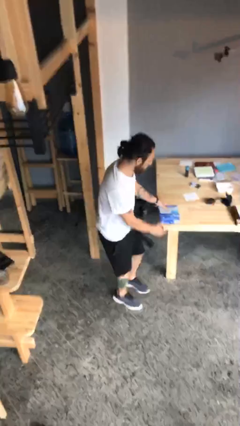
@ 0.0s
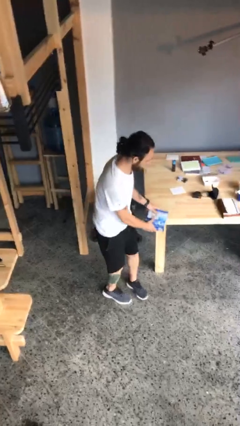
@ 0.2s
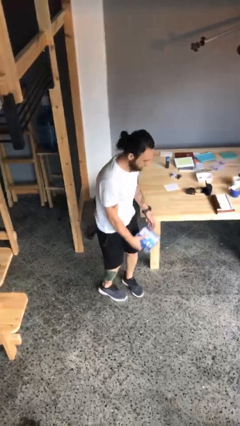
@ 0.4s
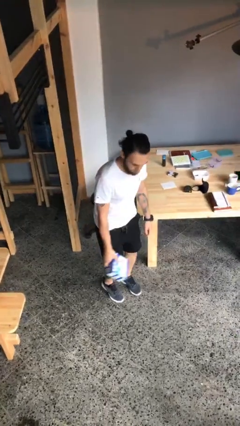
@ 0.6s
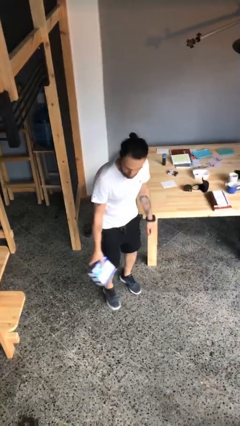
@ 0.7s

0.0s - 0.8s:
person picks up object from table

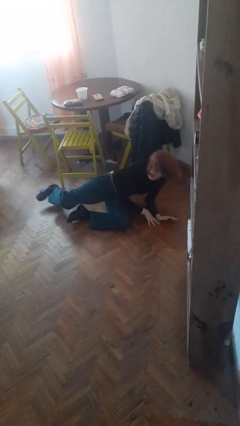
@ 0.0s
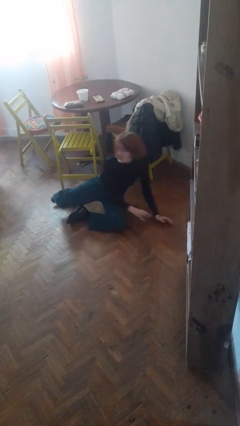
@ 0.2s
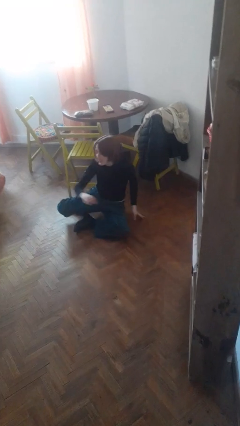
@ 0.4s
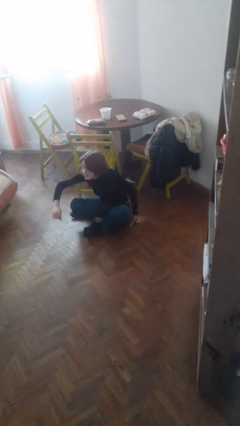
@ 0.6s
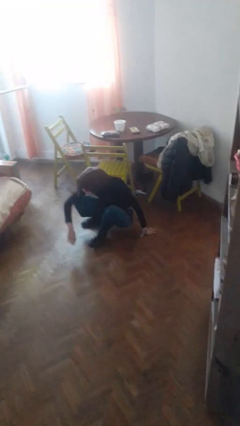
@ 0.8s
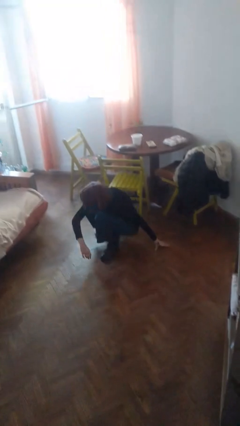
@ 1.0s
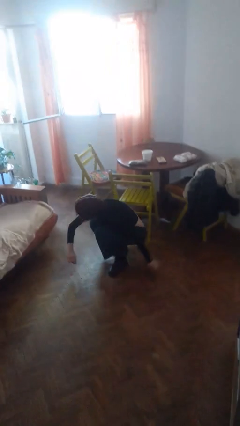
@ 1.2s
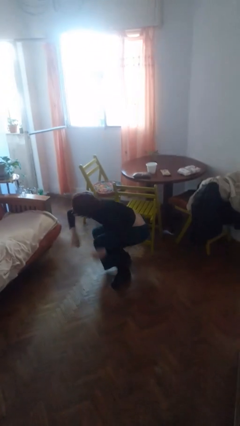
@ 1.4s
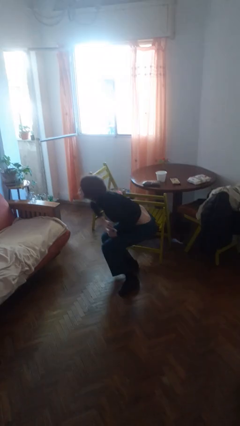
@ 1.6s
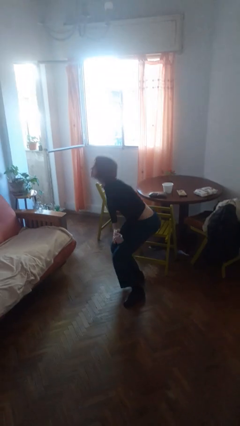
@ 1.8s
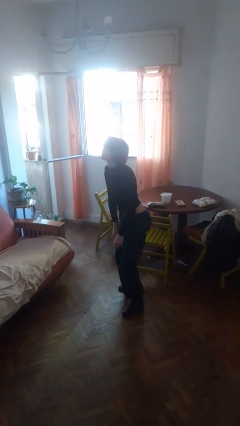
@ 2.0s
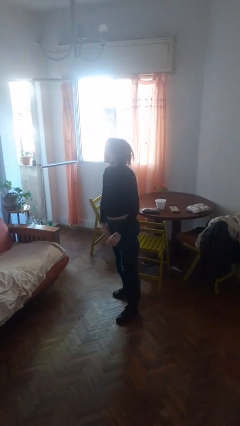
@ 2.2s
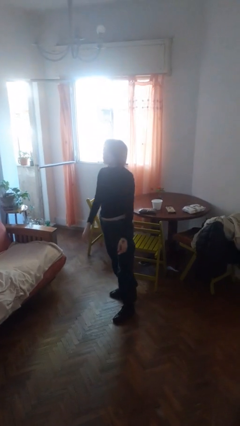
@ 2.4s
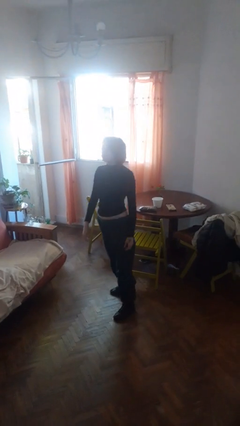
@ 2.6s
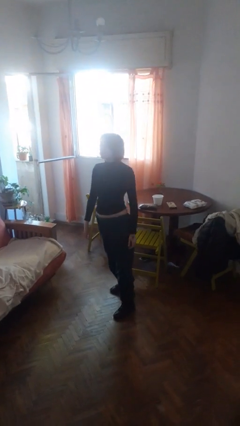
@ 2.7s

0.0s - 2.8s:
person stands up from floor

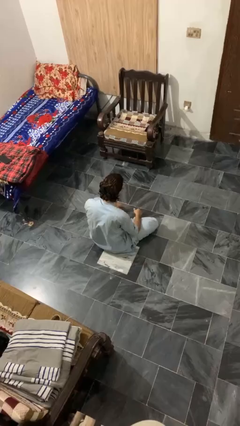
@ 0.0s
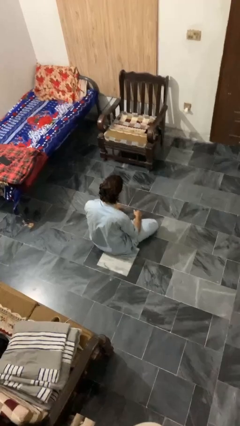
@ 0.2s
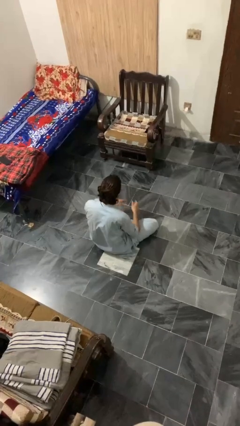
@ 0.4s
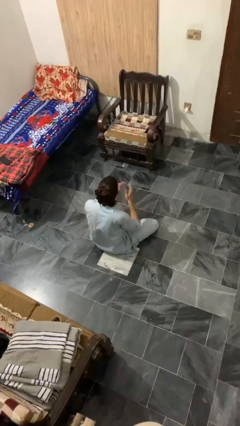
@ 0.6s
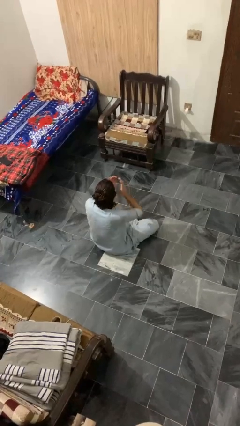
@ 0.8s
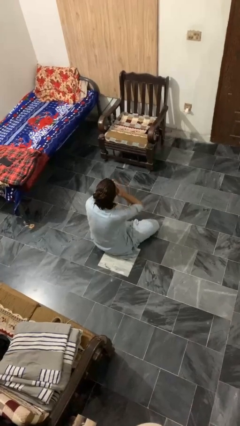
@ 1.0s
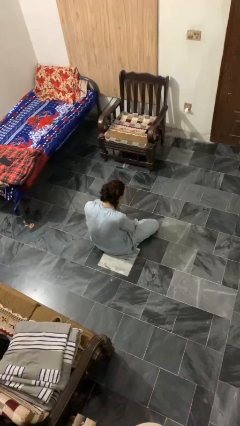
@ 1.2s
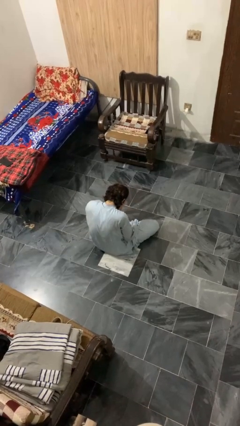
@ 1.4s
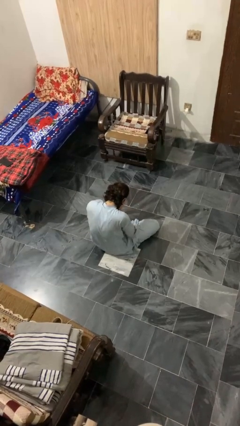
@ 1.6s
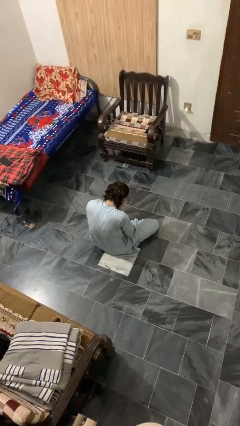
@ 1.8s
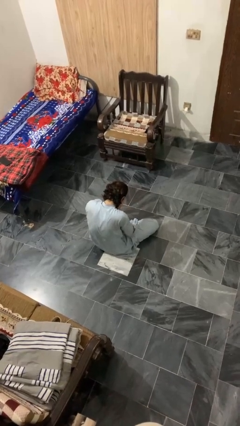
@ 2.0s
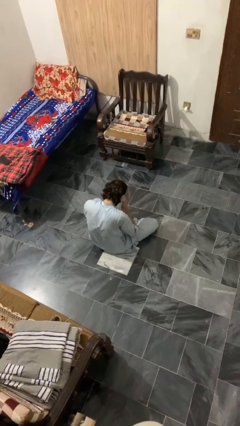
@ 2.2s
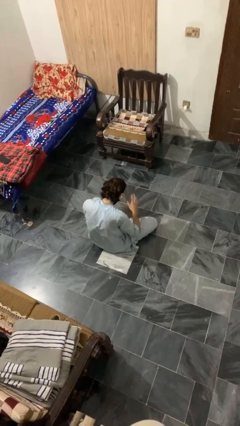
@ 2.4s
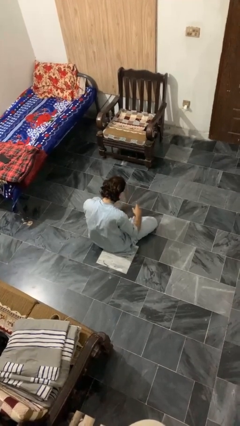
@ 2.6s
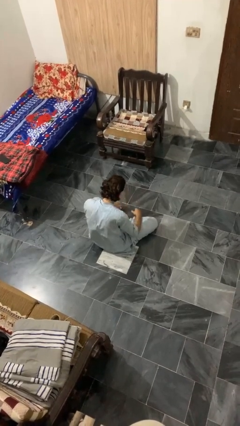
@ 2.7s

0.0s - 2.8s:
person sneezes into hand

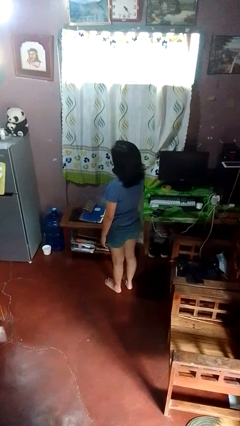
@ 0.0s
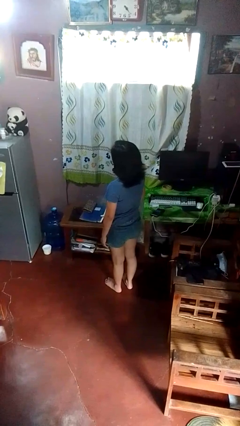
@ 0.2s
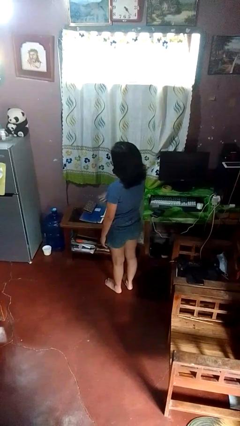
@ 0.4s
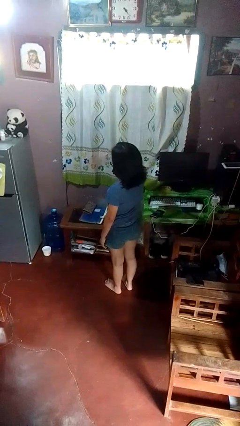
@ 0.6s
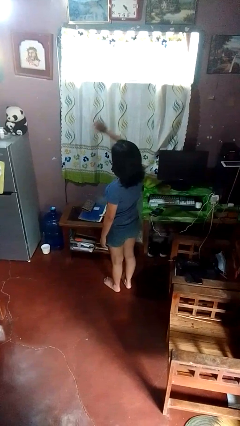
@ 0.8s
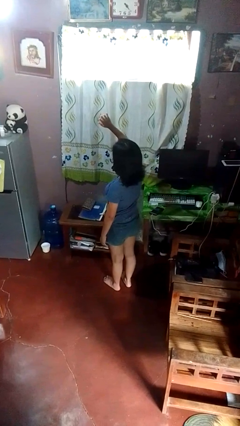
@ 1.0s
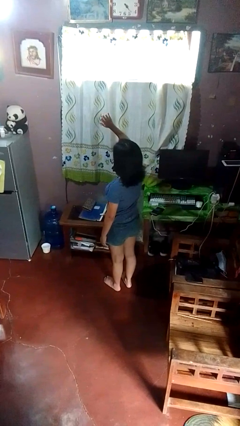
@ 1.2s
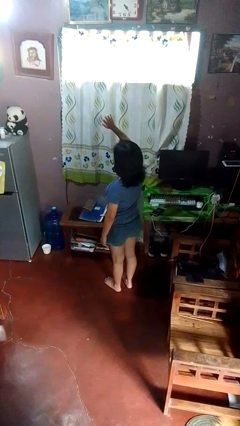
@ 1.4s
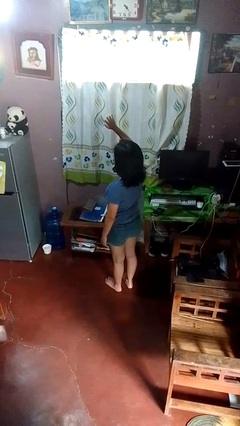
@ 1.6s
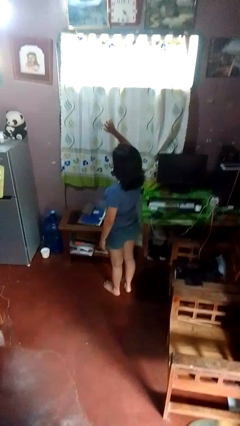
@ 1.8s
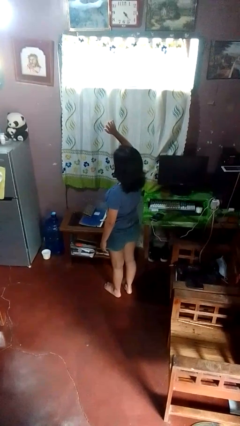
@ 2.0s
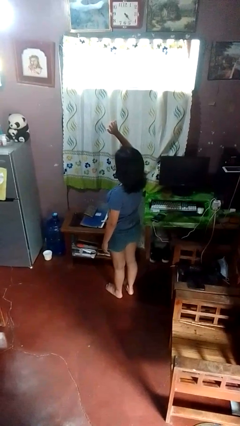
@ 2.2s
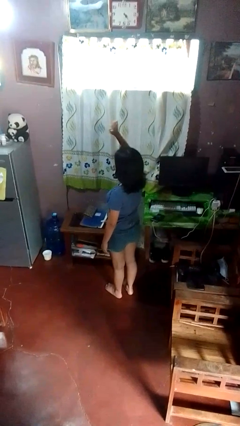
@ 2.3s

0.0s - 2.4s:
person gestures swipe up

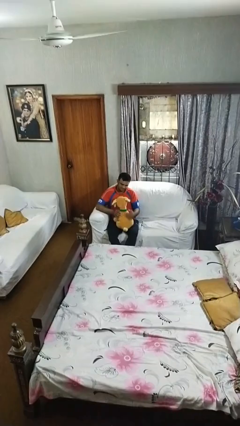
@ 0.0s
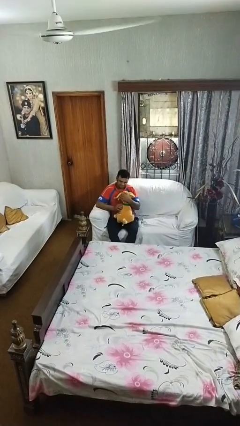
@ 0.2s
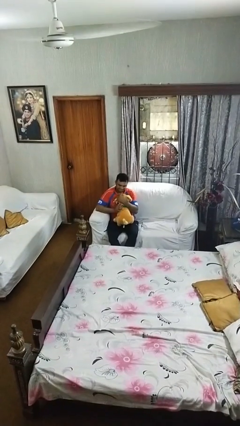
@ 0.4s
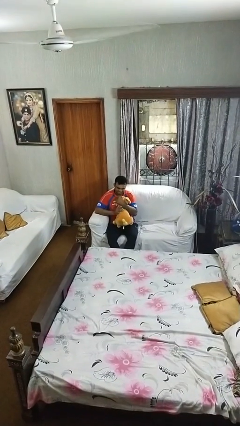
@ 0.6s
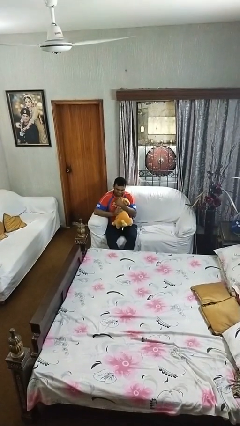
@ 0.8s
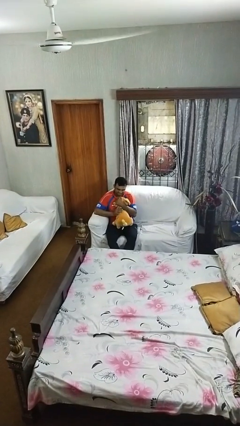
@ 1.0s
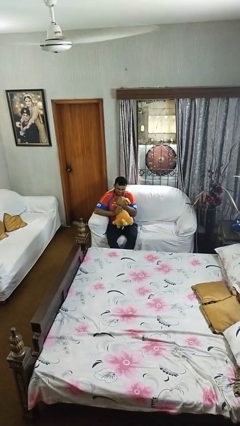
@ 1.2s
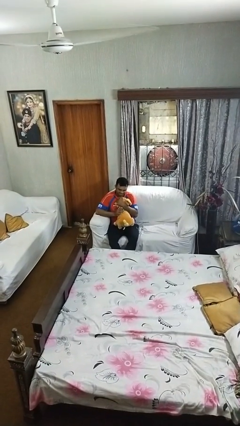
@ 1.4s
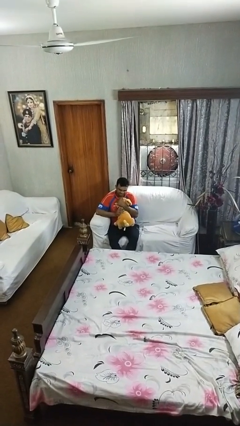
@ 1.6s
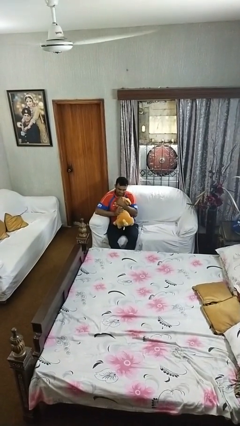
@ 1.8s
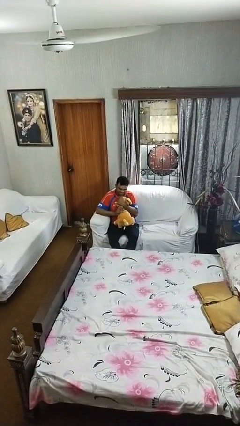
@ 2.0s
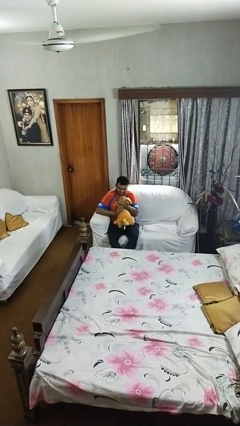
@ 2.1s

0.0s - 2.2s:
person hugs stuffed animal

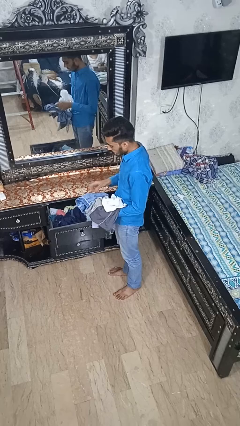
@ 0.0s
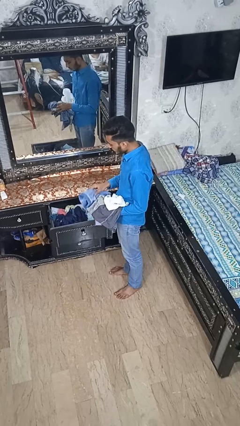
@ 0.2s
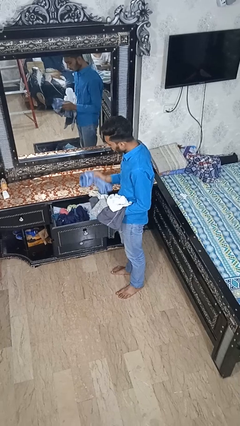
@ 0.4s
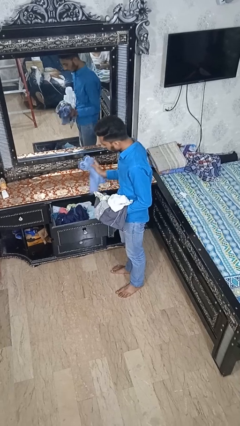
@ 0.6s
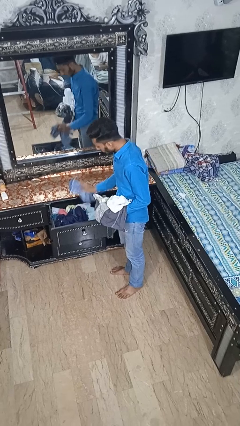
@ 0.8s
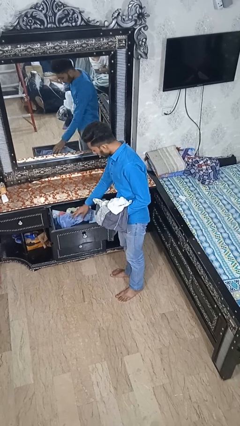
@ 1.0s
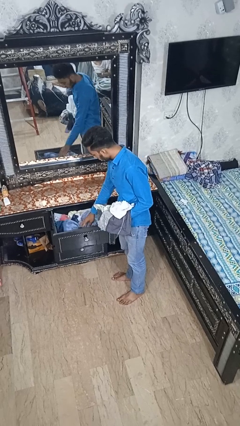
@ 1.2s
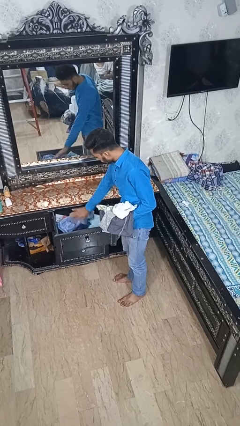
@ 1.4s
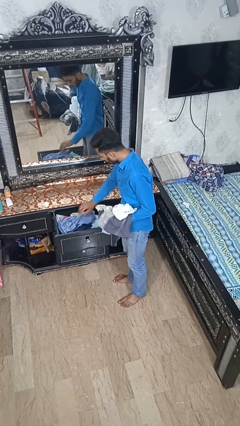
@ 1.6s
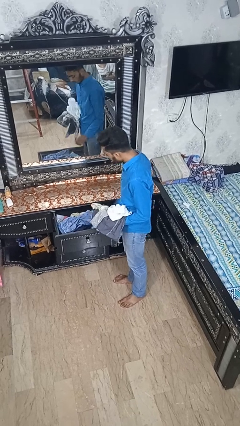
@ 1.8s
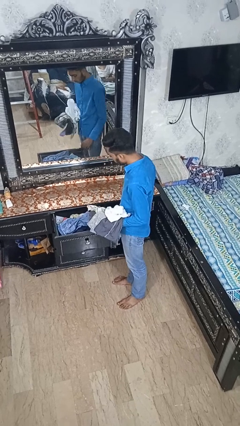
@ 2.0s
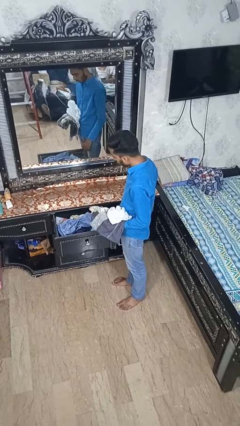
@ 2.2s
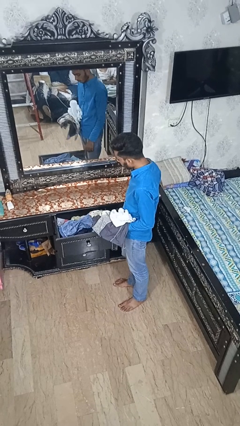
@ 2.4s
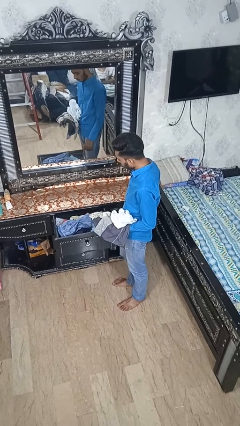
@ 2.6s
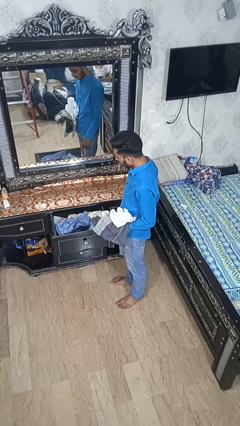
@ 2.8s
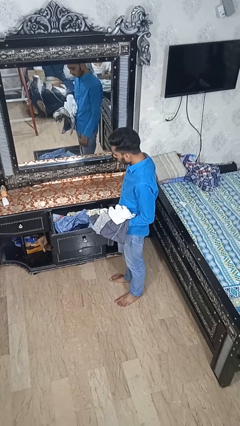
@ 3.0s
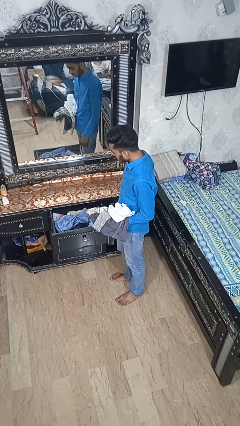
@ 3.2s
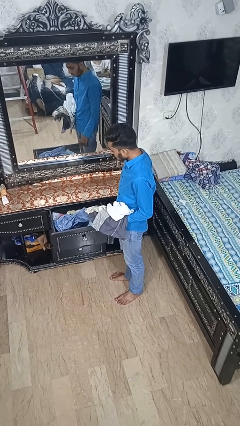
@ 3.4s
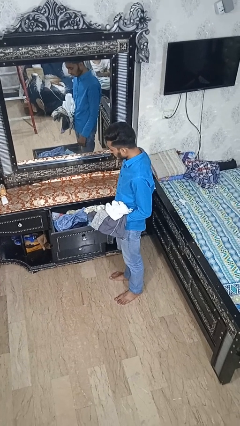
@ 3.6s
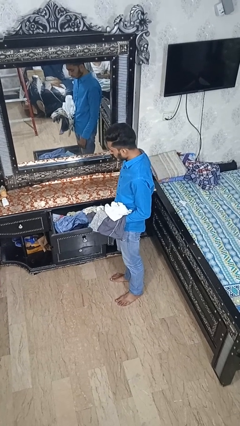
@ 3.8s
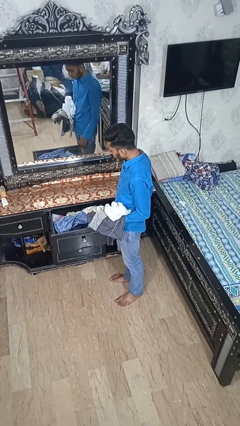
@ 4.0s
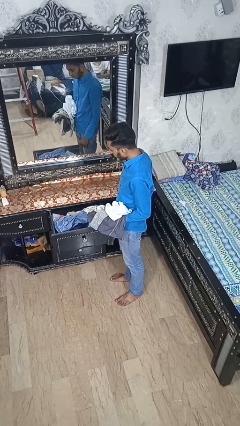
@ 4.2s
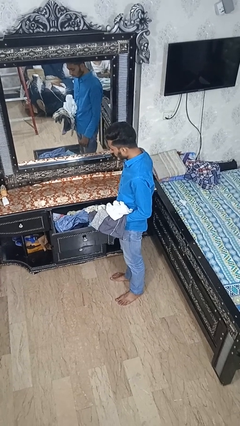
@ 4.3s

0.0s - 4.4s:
person puts clothes into dresser

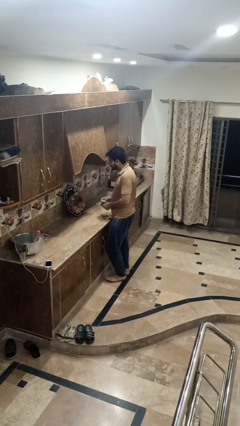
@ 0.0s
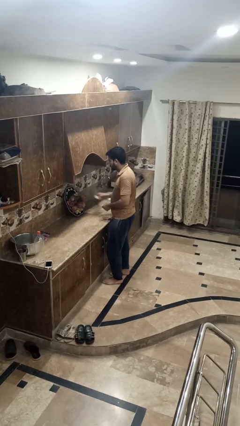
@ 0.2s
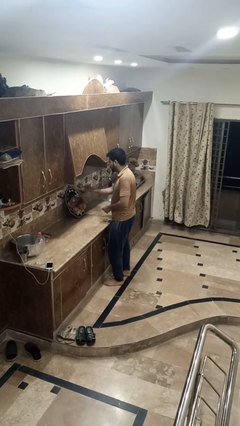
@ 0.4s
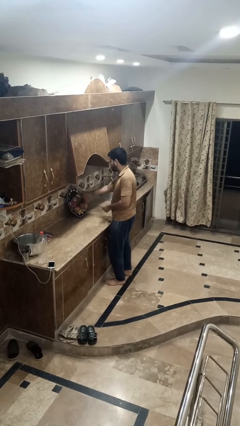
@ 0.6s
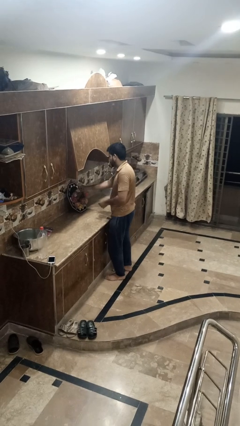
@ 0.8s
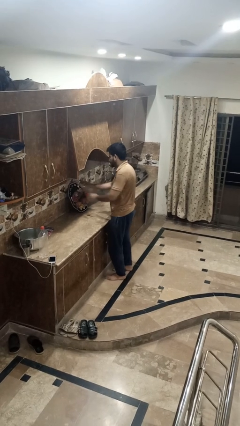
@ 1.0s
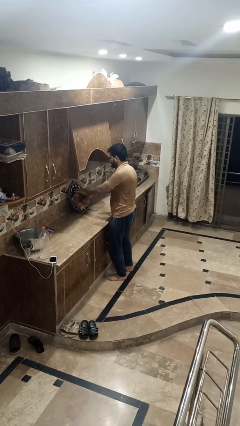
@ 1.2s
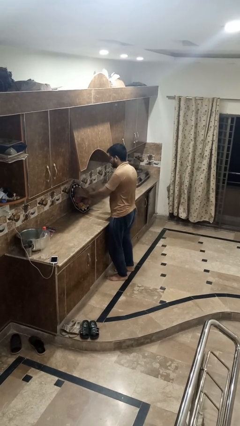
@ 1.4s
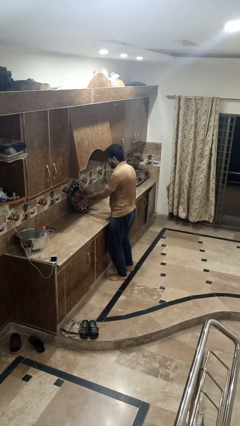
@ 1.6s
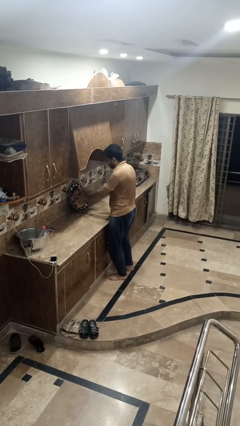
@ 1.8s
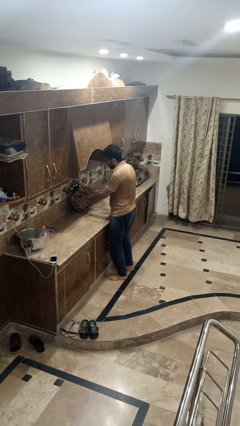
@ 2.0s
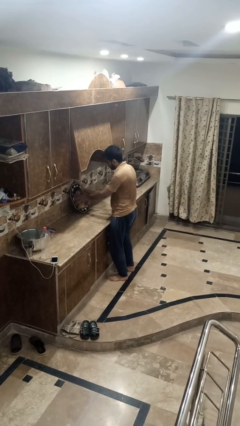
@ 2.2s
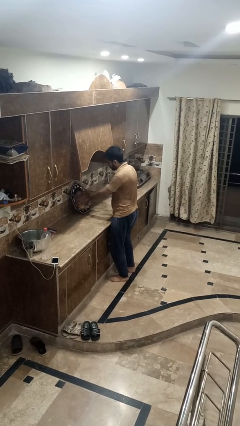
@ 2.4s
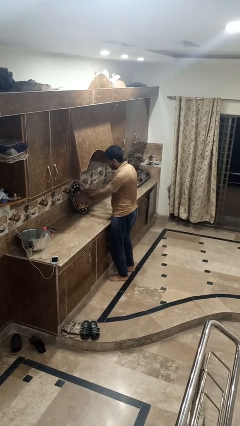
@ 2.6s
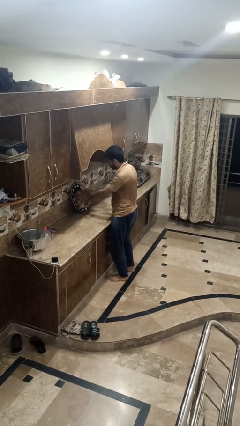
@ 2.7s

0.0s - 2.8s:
person arranges flowers in vase
